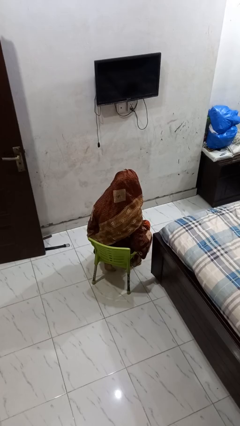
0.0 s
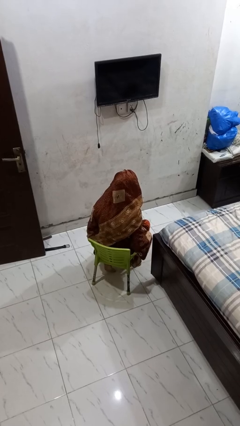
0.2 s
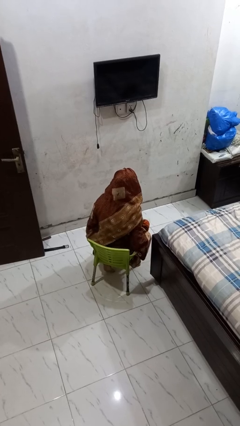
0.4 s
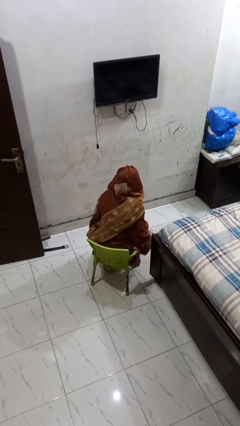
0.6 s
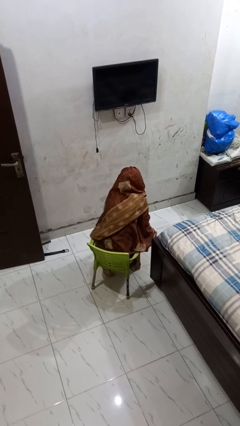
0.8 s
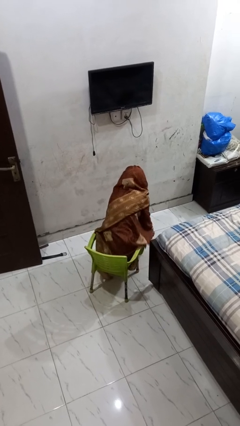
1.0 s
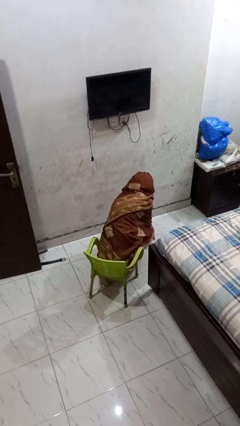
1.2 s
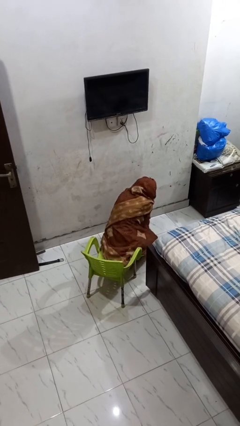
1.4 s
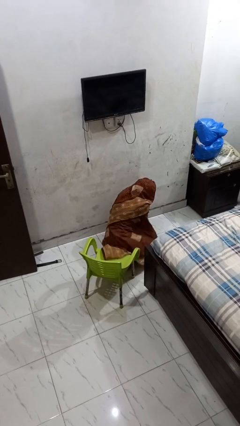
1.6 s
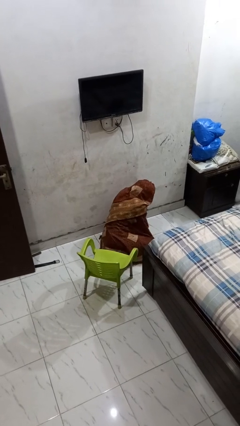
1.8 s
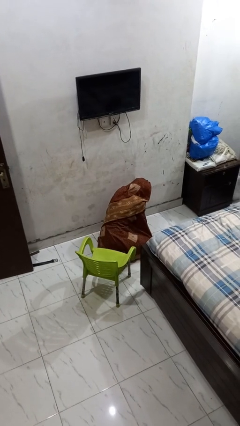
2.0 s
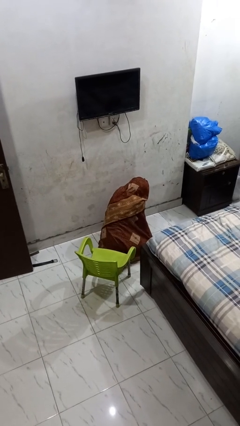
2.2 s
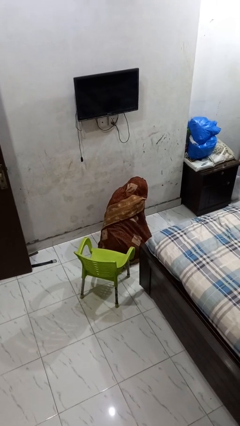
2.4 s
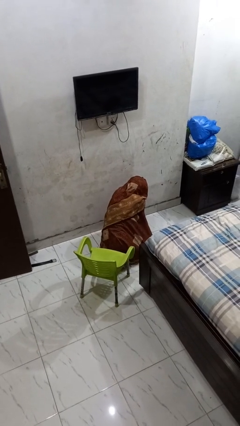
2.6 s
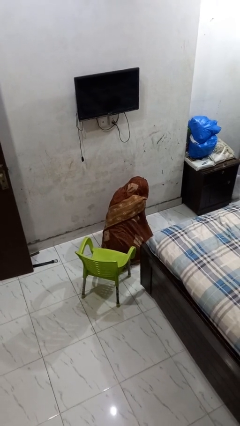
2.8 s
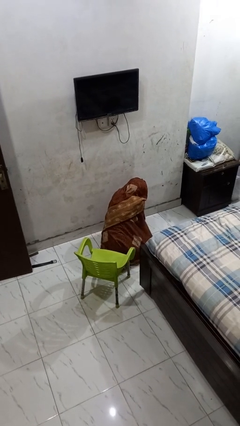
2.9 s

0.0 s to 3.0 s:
person falls from chair

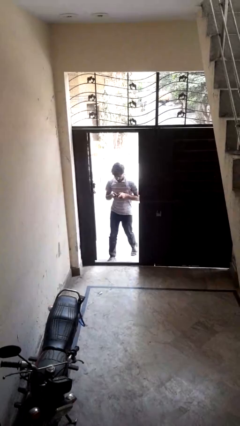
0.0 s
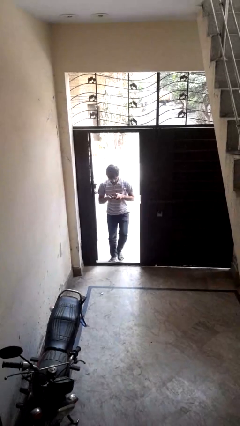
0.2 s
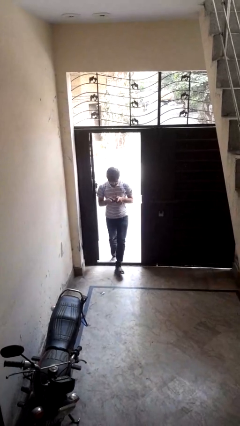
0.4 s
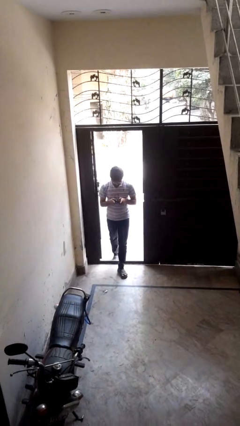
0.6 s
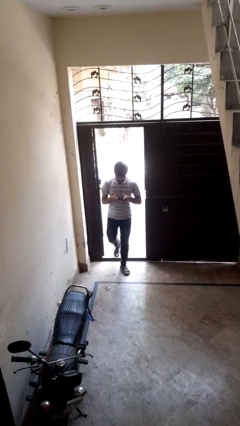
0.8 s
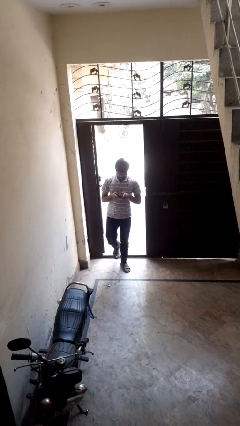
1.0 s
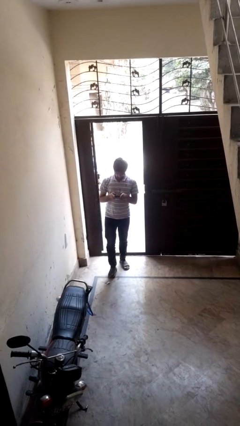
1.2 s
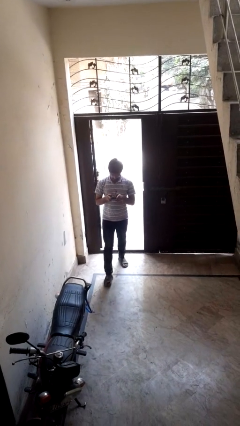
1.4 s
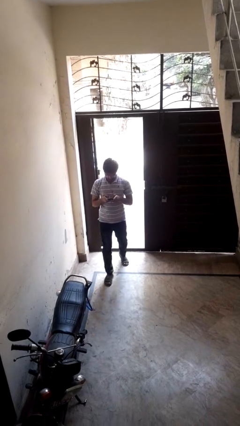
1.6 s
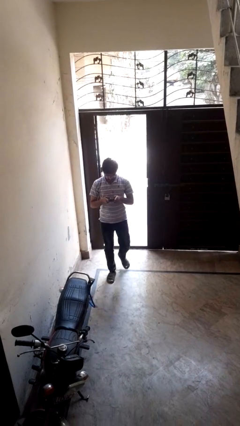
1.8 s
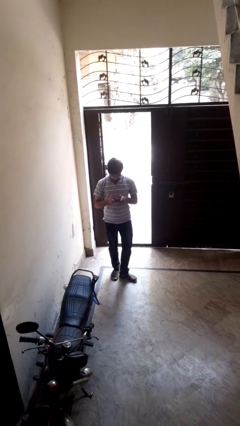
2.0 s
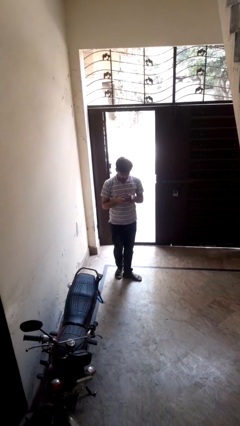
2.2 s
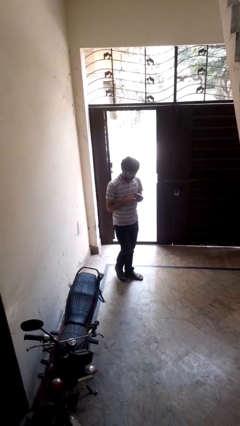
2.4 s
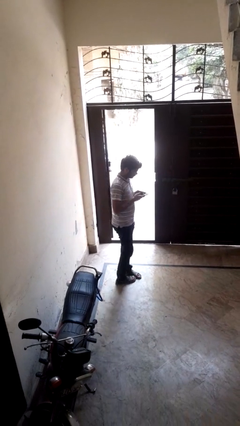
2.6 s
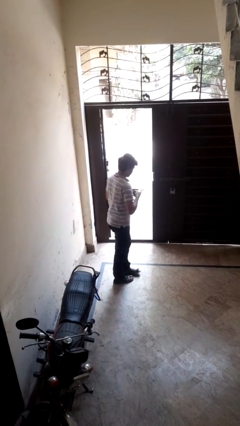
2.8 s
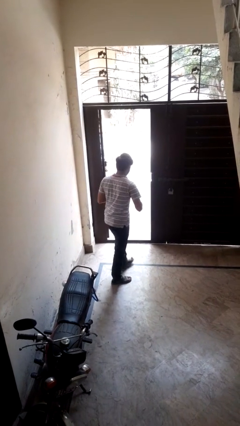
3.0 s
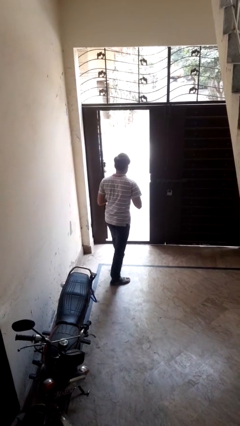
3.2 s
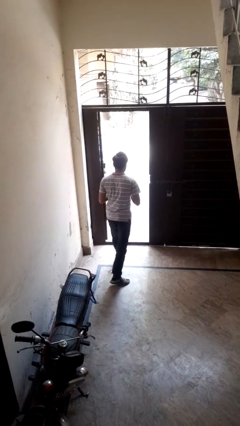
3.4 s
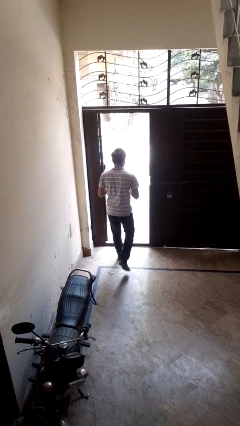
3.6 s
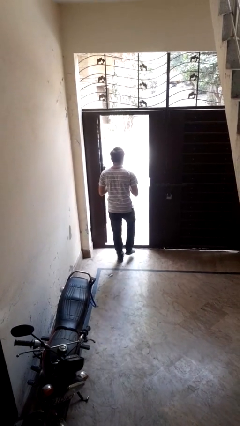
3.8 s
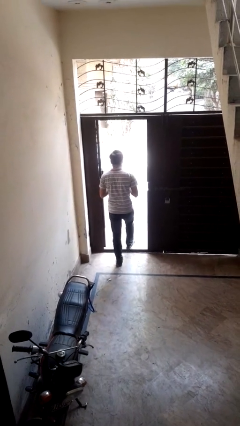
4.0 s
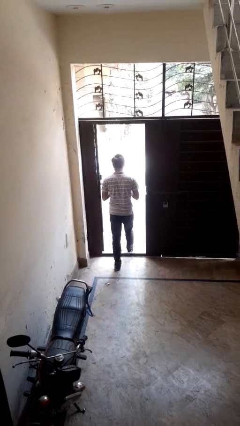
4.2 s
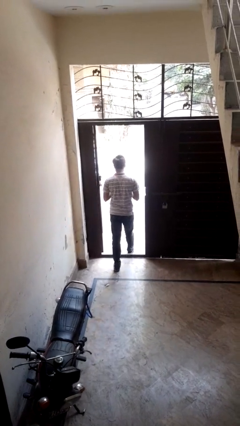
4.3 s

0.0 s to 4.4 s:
person enters scene through structure

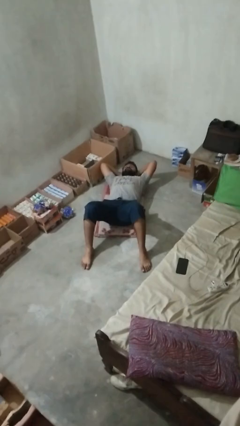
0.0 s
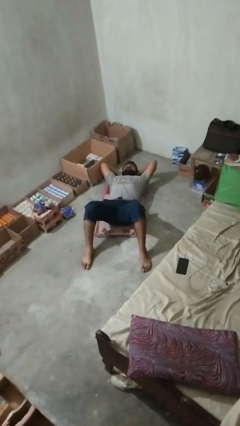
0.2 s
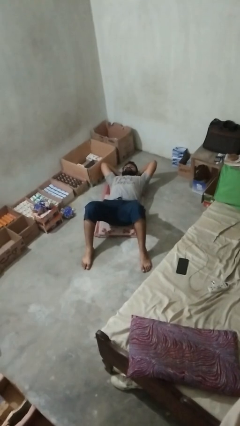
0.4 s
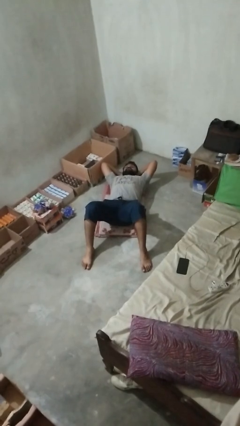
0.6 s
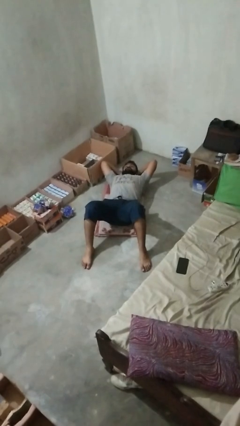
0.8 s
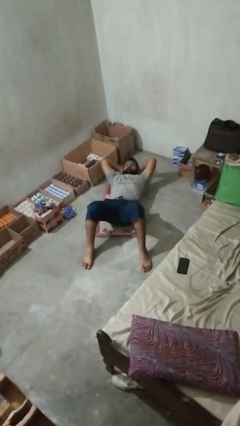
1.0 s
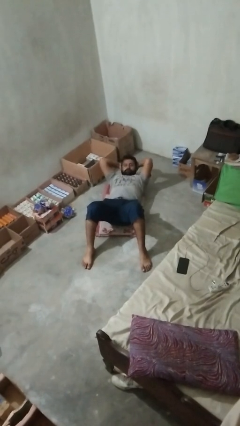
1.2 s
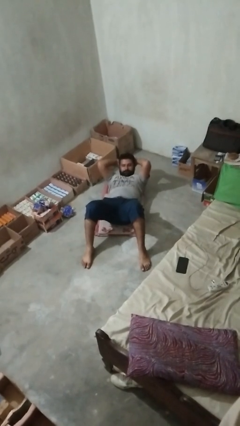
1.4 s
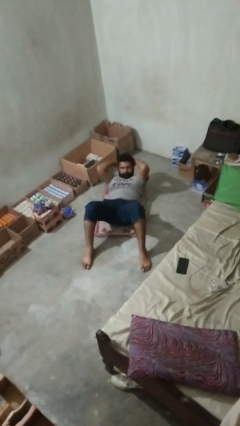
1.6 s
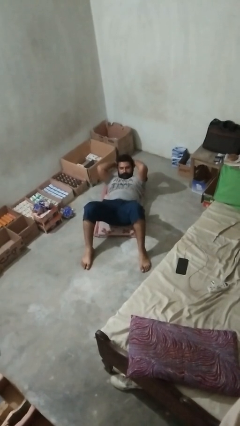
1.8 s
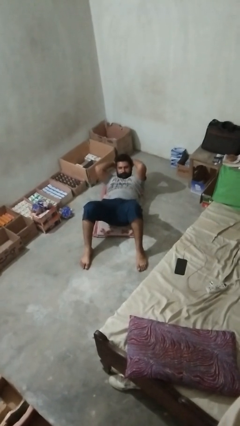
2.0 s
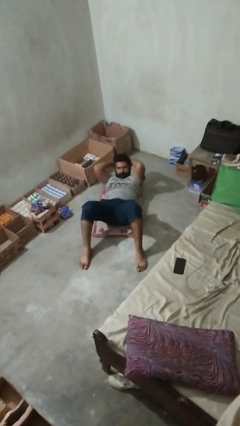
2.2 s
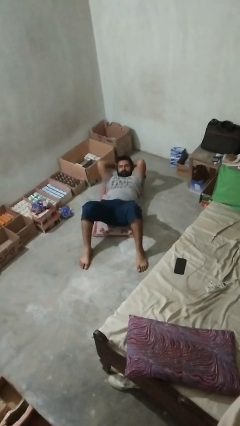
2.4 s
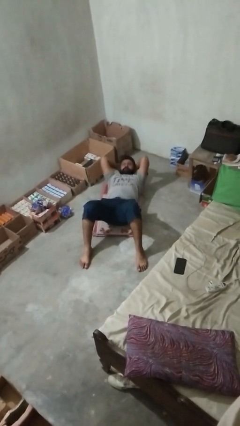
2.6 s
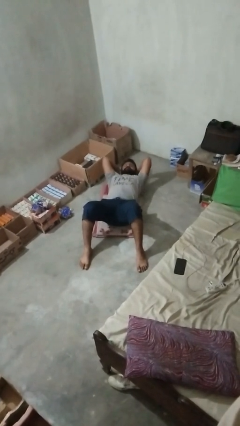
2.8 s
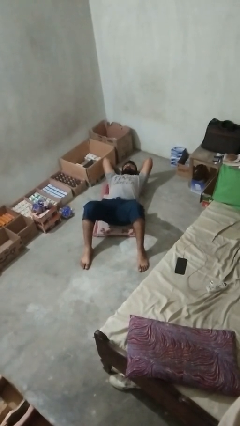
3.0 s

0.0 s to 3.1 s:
person exercises with situp

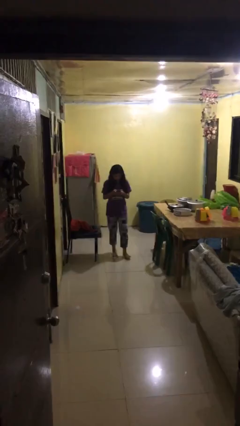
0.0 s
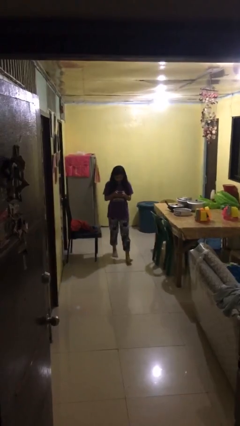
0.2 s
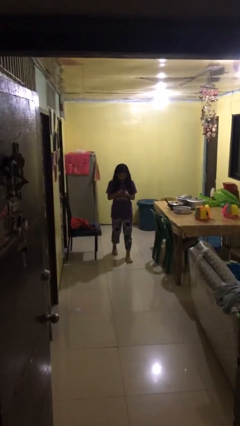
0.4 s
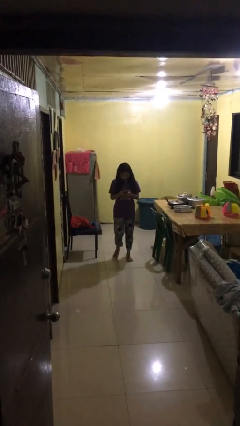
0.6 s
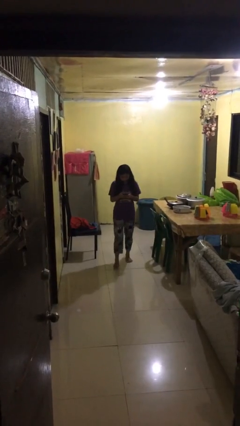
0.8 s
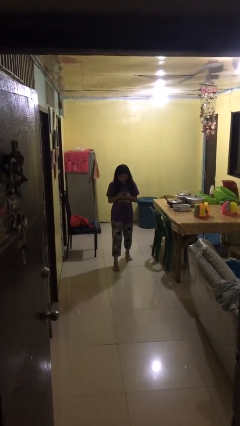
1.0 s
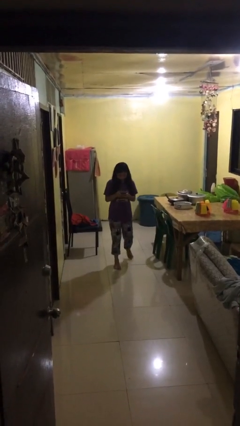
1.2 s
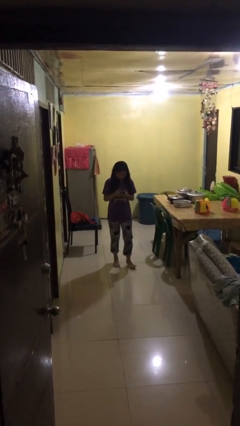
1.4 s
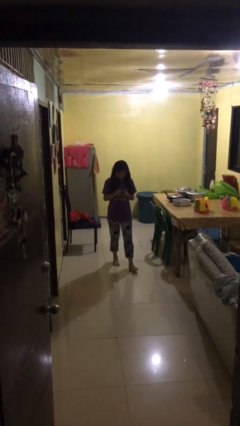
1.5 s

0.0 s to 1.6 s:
person texts on phone

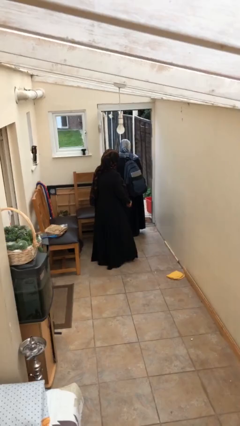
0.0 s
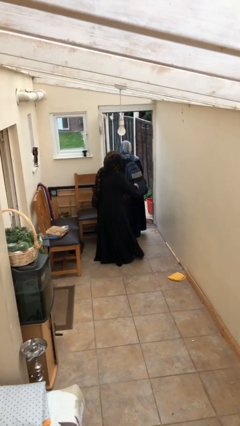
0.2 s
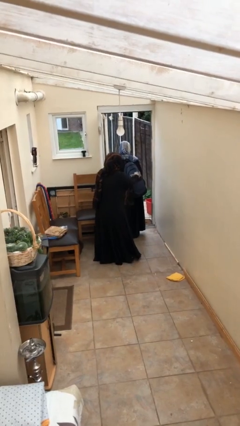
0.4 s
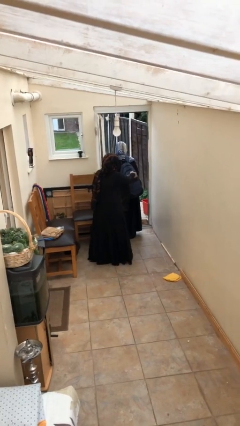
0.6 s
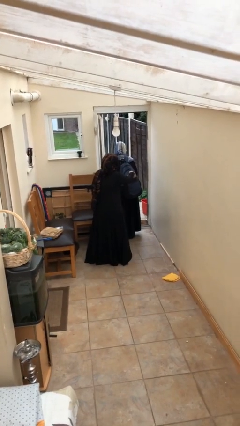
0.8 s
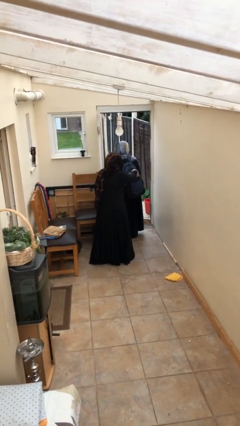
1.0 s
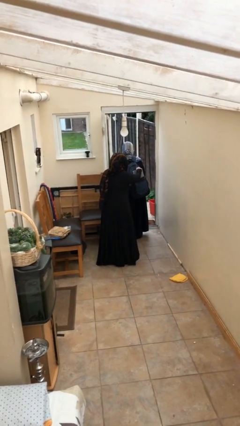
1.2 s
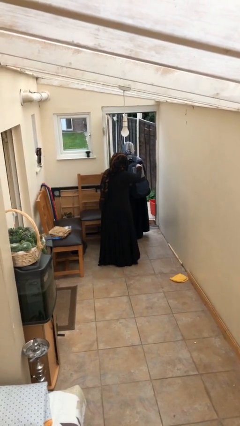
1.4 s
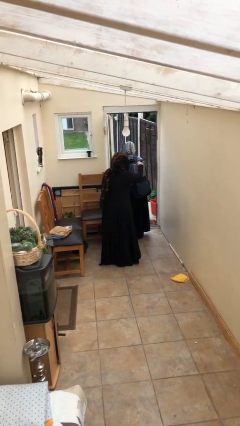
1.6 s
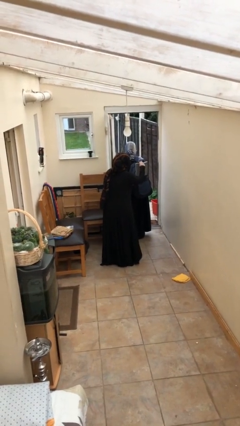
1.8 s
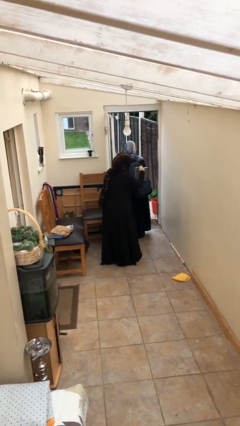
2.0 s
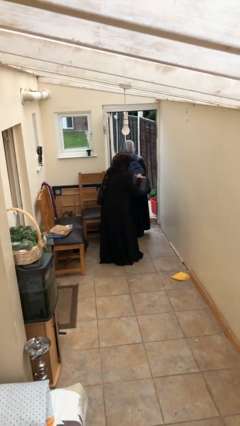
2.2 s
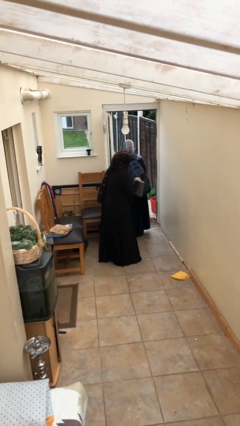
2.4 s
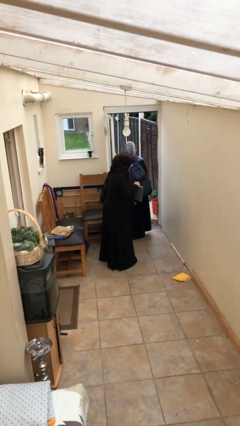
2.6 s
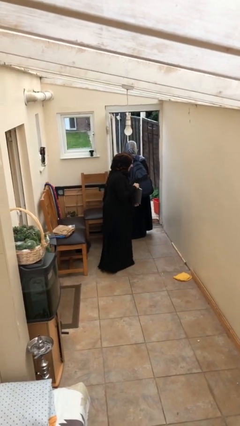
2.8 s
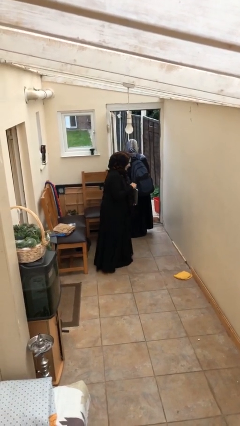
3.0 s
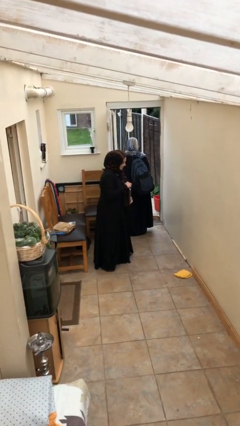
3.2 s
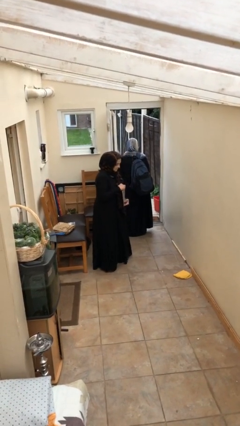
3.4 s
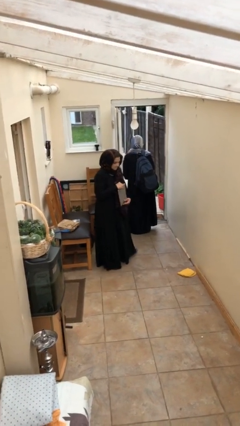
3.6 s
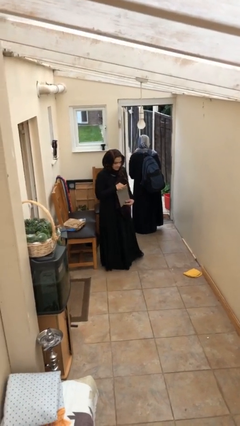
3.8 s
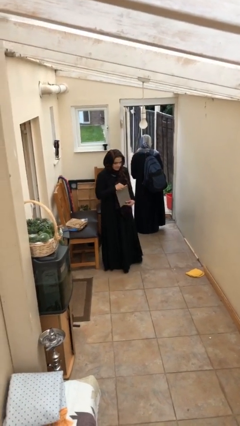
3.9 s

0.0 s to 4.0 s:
person steals object from person

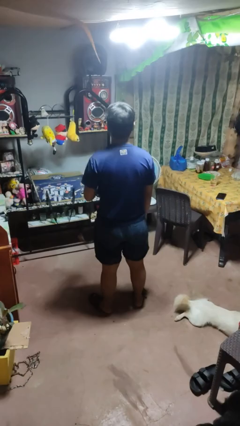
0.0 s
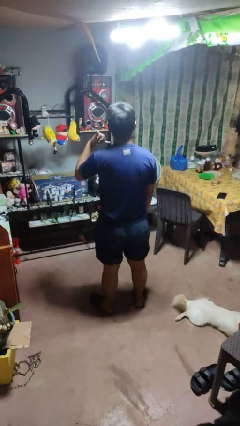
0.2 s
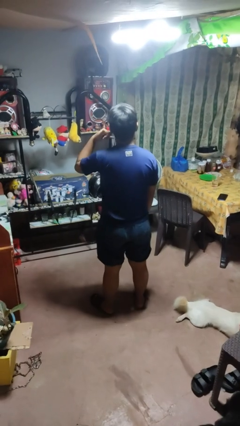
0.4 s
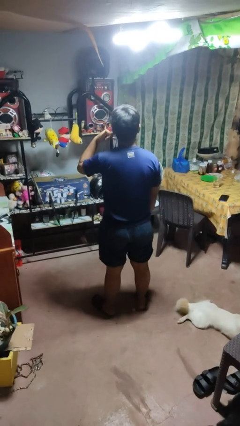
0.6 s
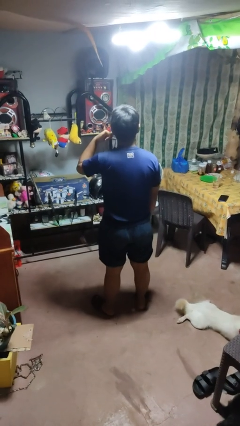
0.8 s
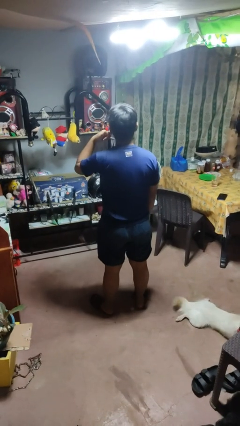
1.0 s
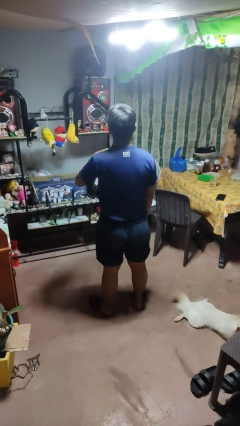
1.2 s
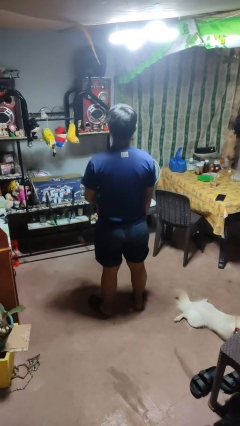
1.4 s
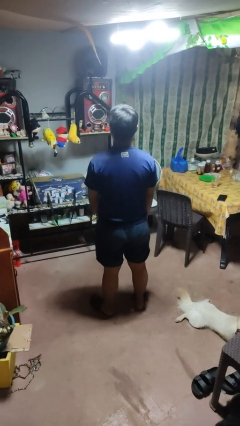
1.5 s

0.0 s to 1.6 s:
person gestures call me

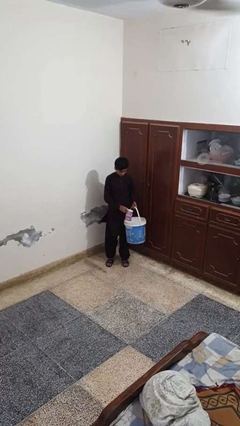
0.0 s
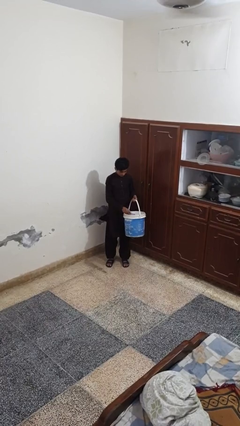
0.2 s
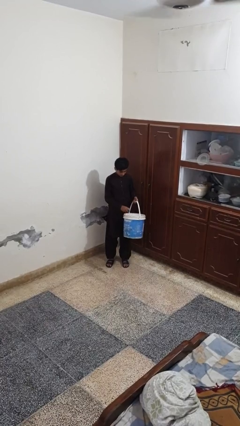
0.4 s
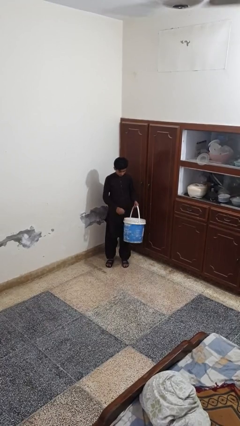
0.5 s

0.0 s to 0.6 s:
person puts object into basket
